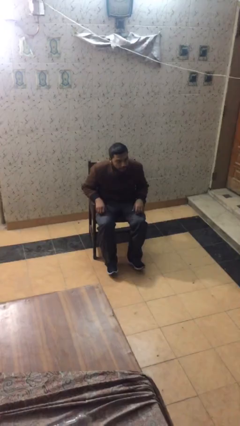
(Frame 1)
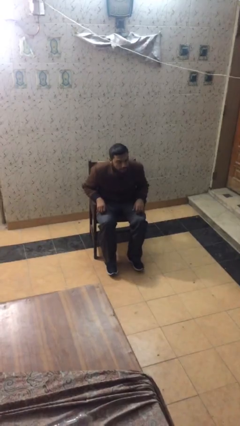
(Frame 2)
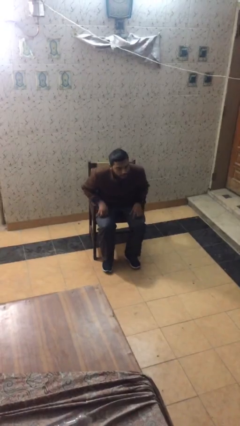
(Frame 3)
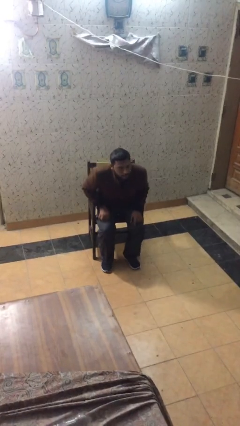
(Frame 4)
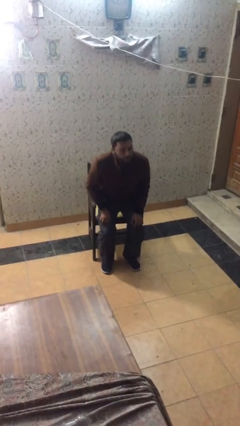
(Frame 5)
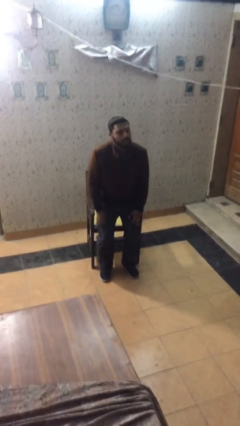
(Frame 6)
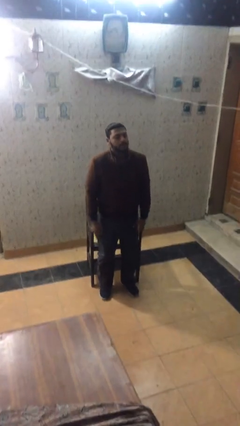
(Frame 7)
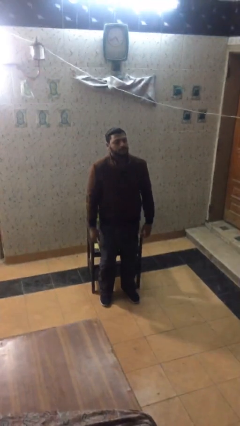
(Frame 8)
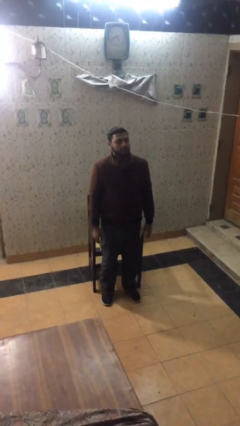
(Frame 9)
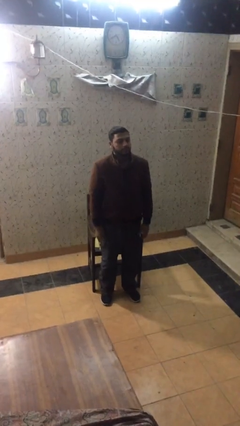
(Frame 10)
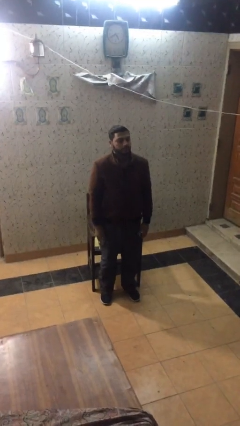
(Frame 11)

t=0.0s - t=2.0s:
person stands up

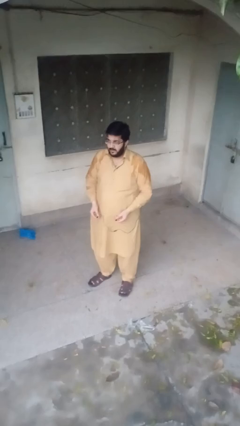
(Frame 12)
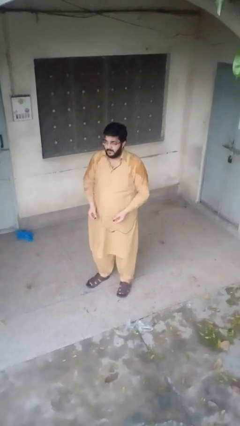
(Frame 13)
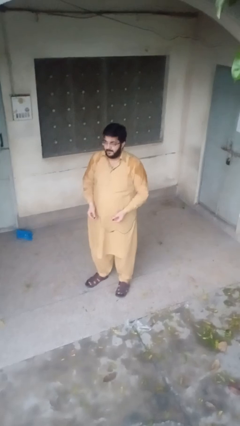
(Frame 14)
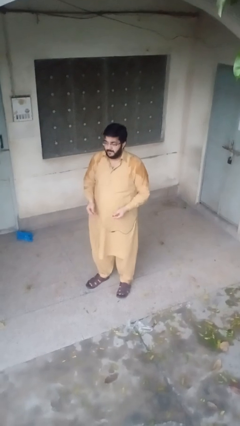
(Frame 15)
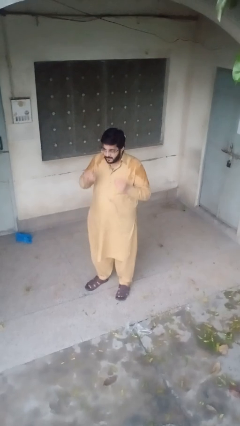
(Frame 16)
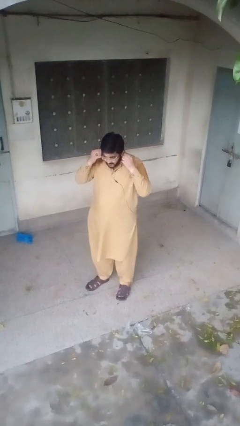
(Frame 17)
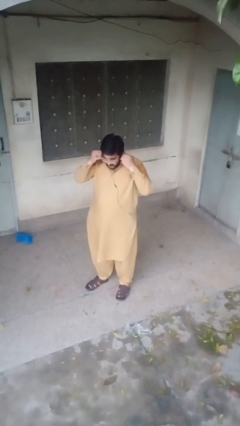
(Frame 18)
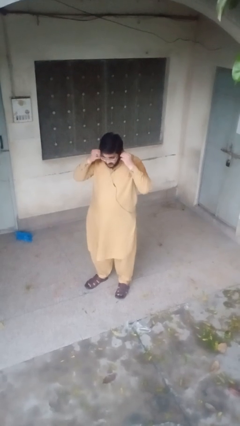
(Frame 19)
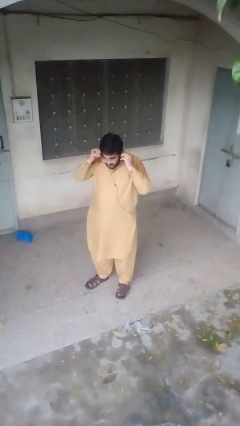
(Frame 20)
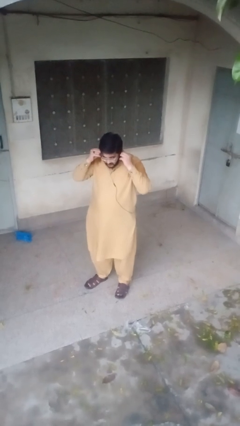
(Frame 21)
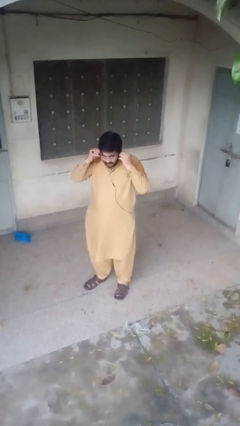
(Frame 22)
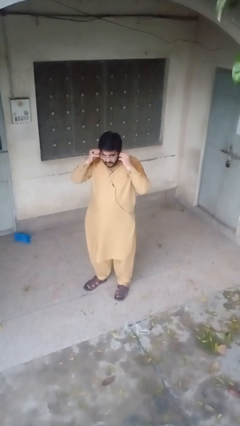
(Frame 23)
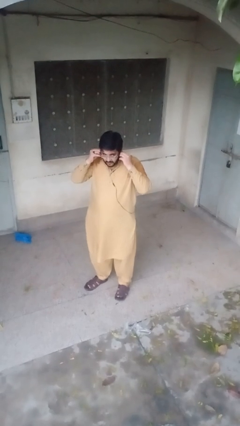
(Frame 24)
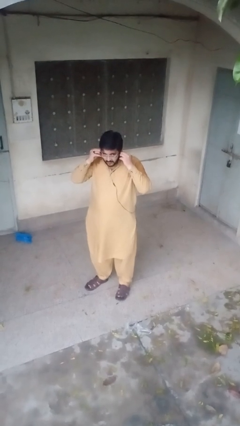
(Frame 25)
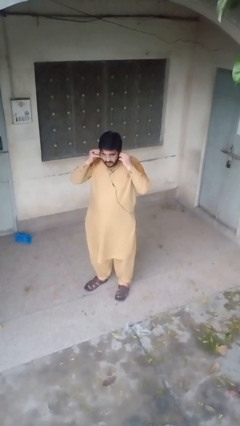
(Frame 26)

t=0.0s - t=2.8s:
person puts on headphones

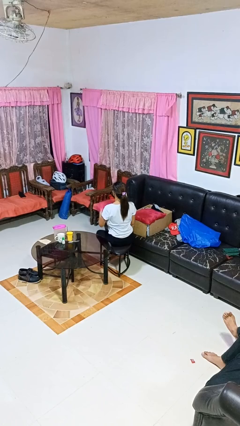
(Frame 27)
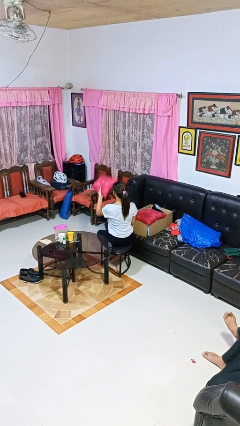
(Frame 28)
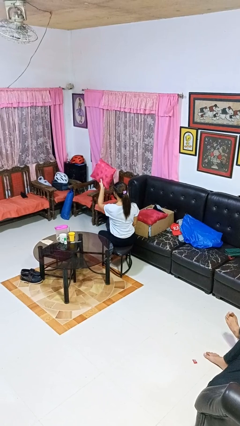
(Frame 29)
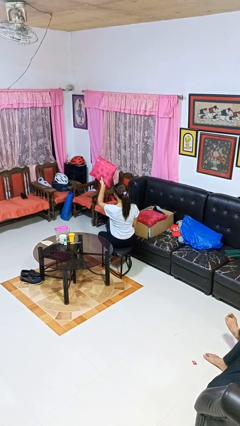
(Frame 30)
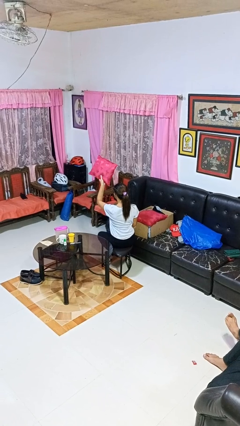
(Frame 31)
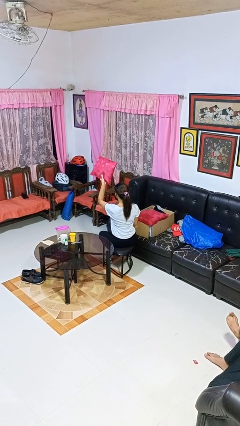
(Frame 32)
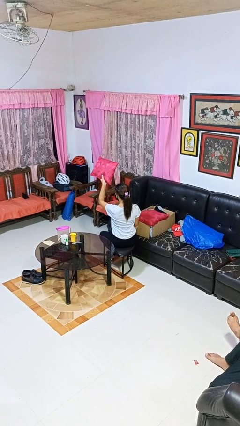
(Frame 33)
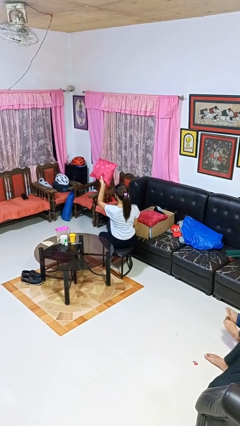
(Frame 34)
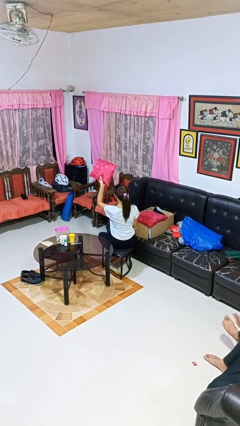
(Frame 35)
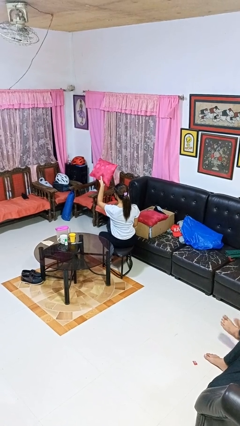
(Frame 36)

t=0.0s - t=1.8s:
person holds object above head

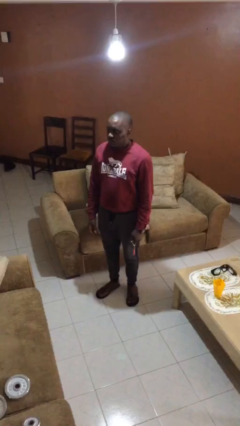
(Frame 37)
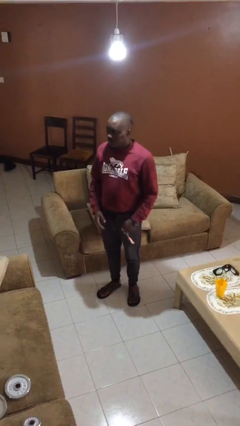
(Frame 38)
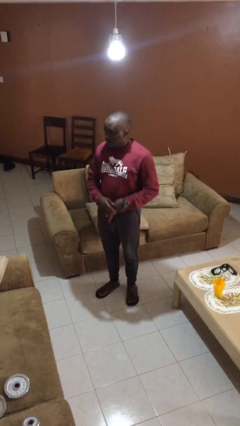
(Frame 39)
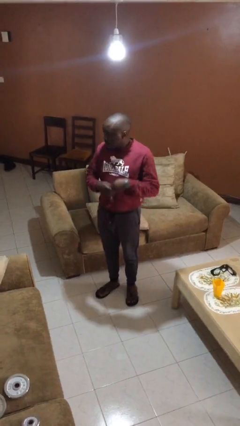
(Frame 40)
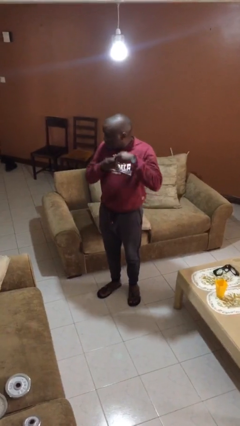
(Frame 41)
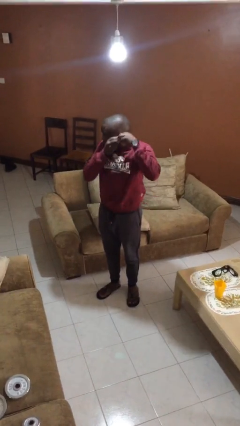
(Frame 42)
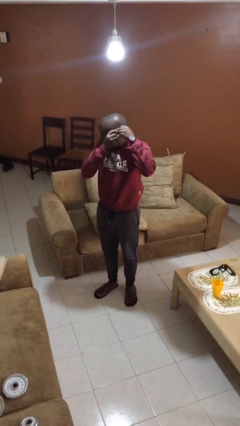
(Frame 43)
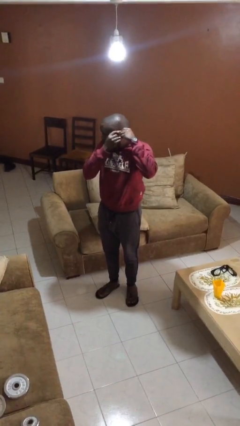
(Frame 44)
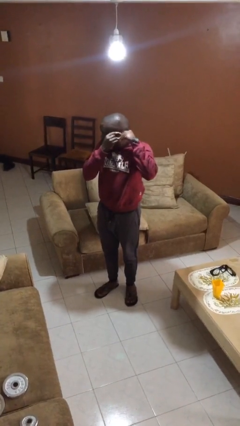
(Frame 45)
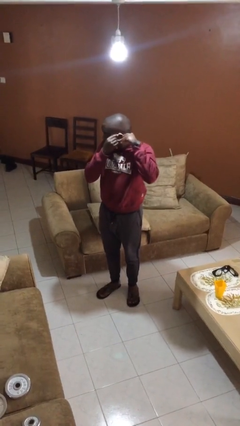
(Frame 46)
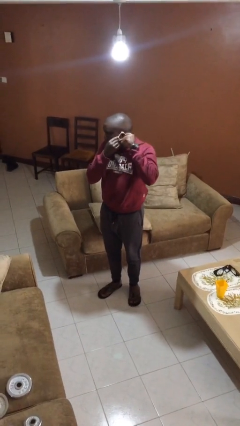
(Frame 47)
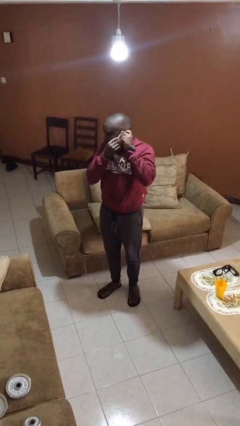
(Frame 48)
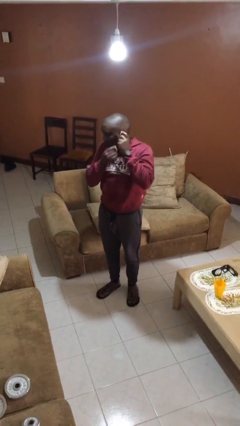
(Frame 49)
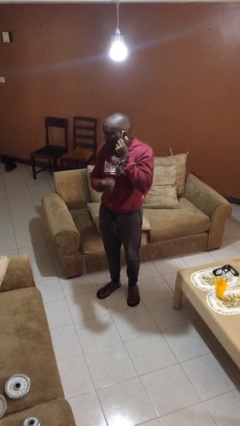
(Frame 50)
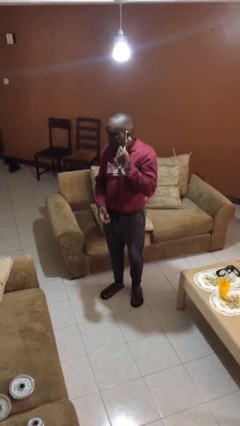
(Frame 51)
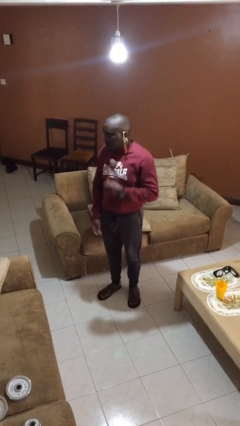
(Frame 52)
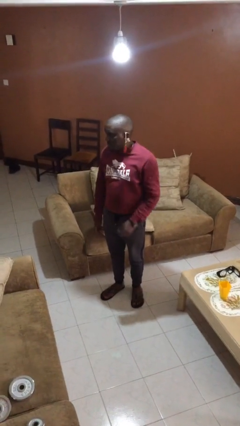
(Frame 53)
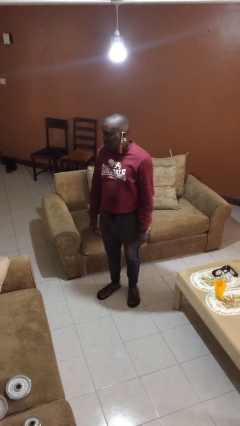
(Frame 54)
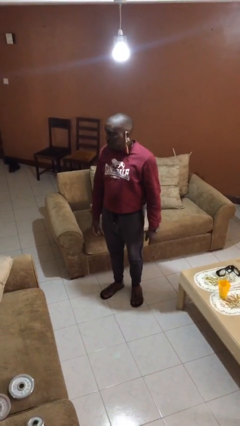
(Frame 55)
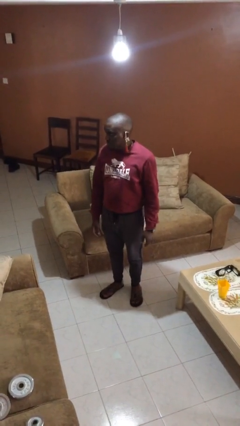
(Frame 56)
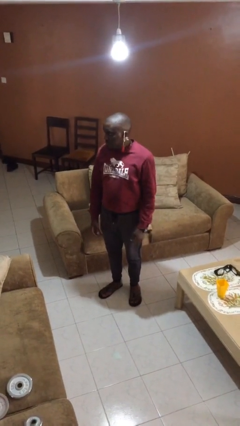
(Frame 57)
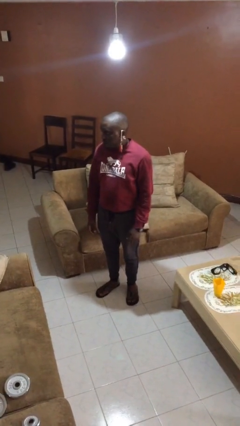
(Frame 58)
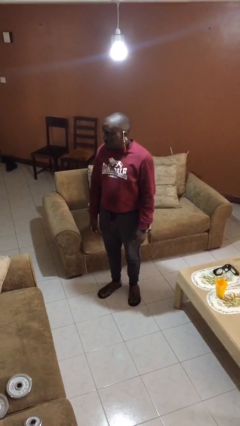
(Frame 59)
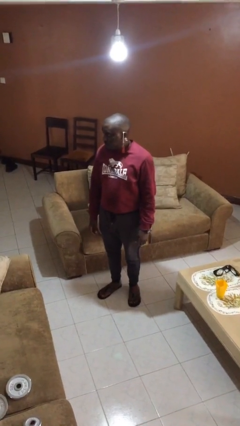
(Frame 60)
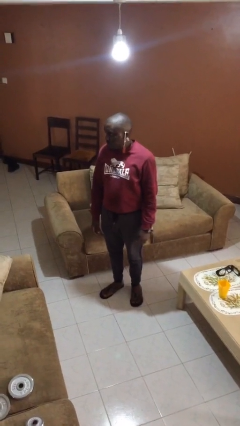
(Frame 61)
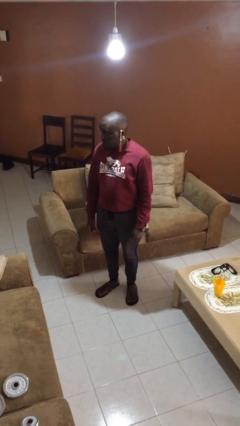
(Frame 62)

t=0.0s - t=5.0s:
person puts on earrings

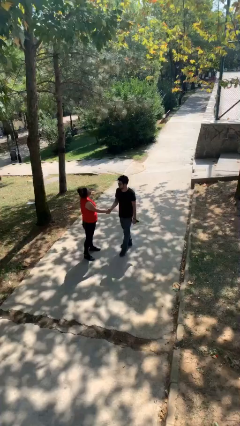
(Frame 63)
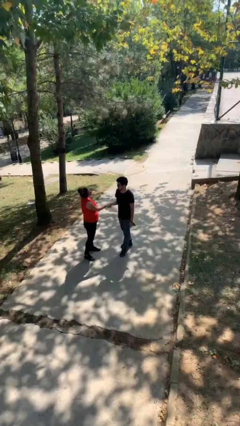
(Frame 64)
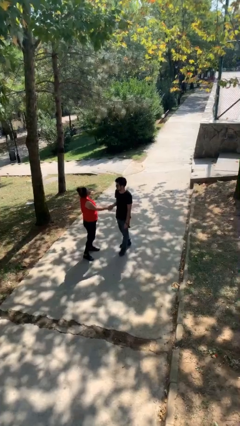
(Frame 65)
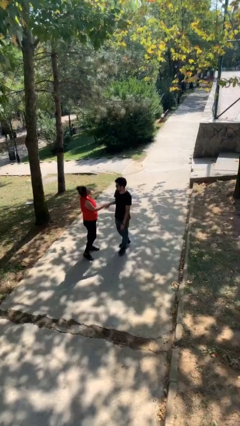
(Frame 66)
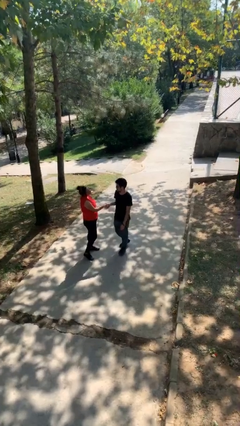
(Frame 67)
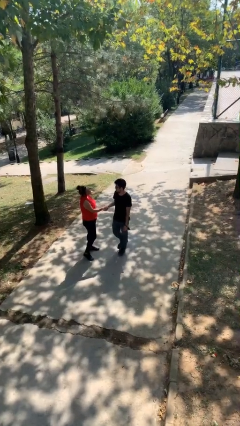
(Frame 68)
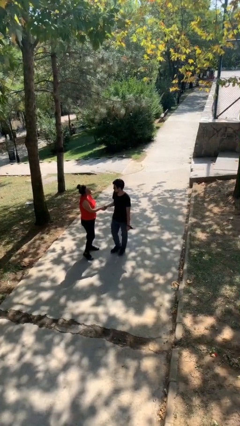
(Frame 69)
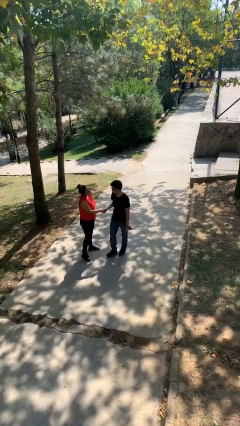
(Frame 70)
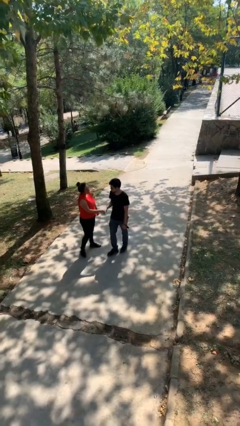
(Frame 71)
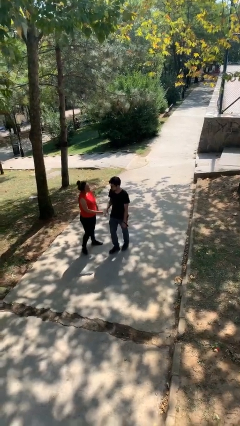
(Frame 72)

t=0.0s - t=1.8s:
person shakes hand

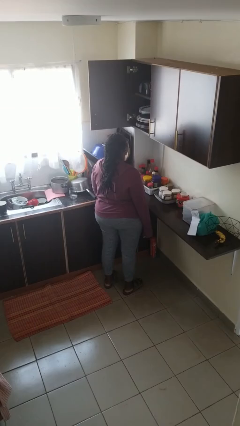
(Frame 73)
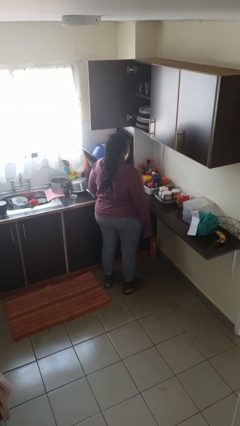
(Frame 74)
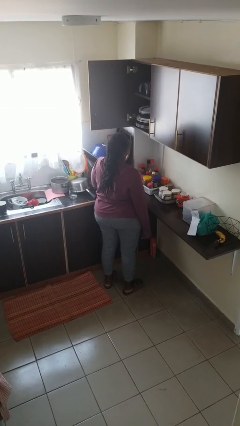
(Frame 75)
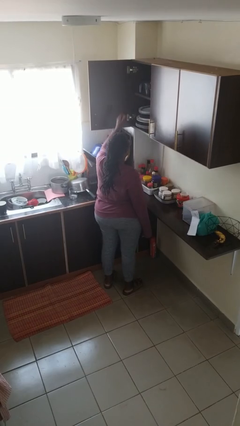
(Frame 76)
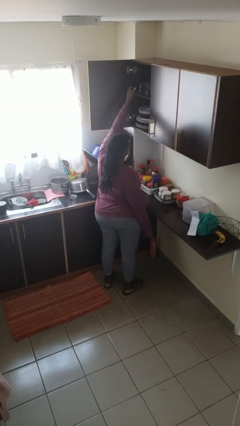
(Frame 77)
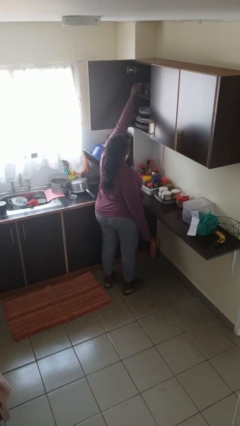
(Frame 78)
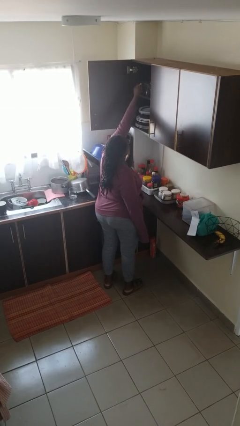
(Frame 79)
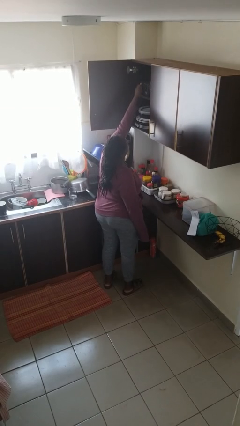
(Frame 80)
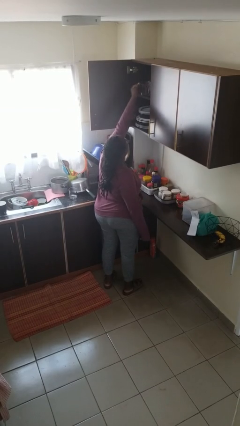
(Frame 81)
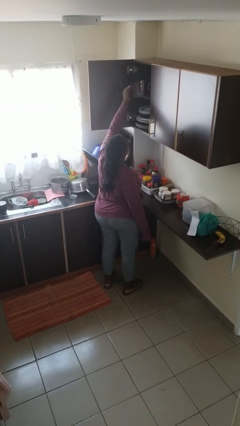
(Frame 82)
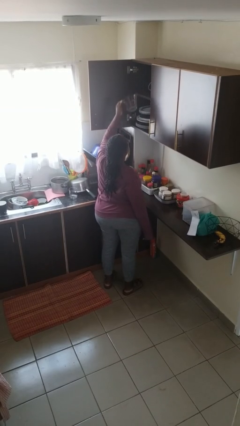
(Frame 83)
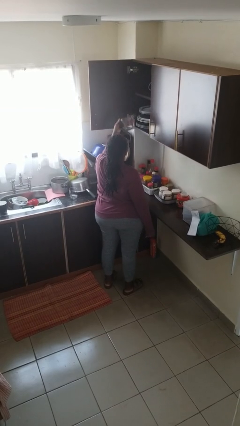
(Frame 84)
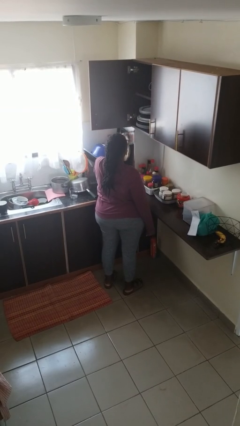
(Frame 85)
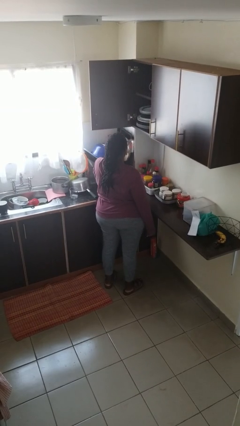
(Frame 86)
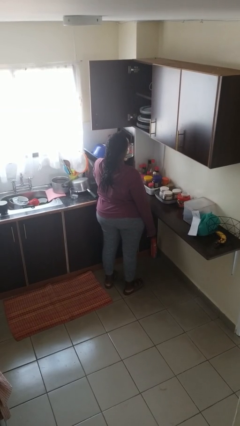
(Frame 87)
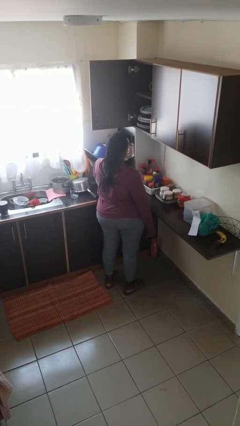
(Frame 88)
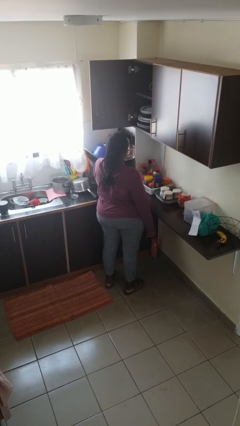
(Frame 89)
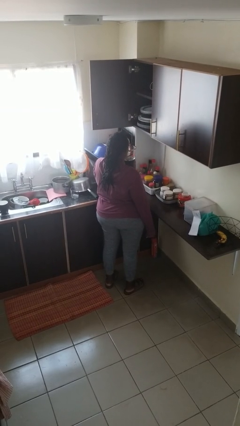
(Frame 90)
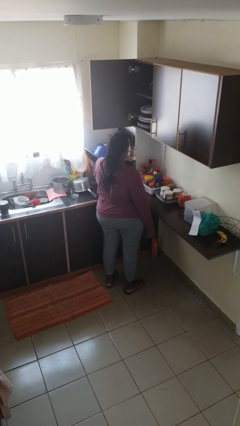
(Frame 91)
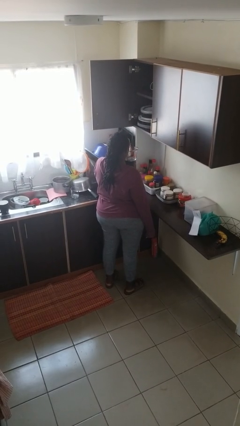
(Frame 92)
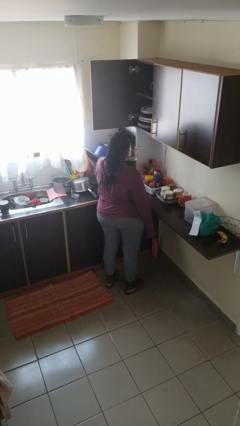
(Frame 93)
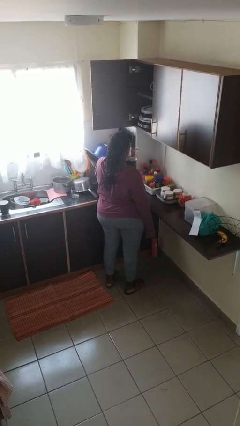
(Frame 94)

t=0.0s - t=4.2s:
person picks up object from cabinet
